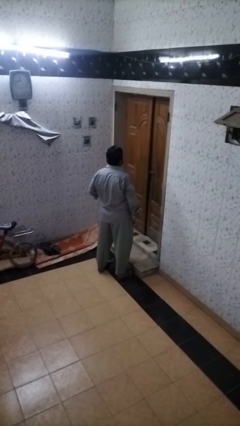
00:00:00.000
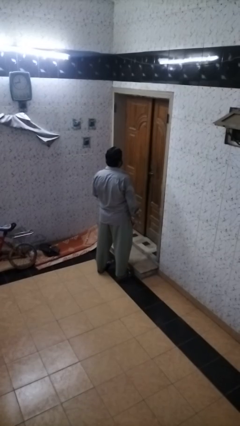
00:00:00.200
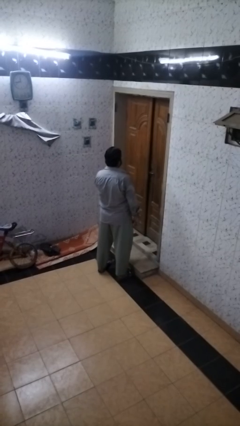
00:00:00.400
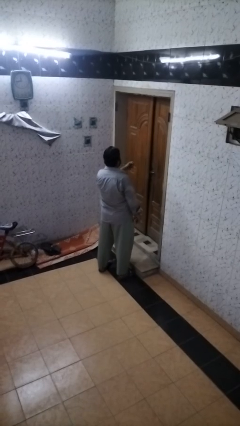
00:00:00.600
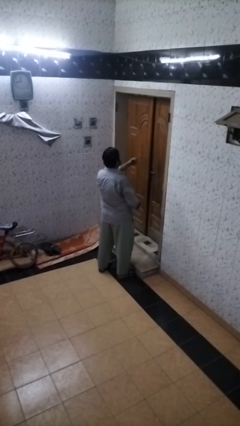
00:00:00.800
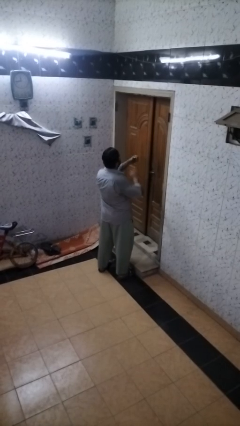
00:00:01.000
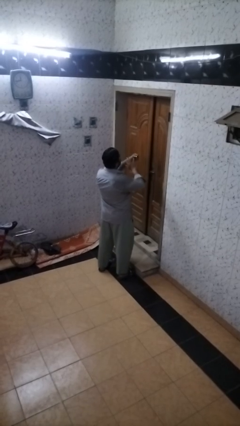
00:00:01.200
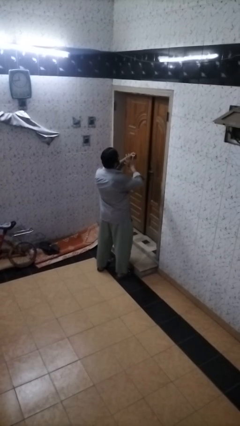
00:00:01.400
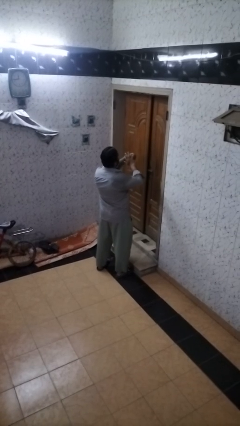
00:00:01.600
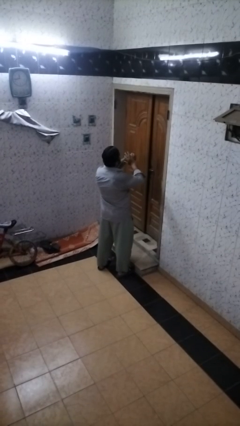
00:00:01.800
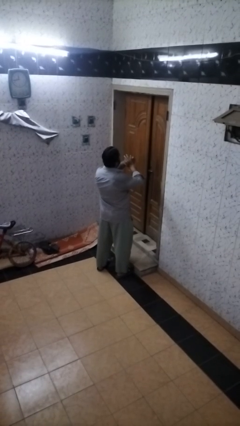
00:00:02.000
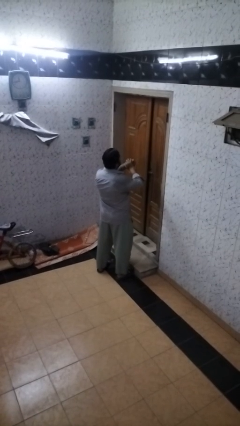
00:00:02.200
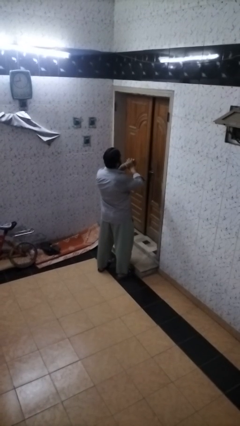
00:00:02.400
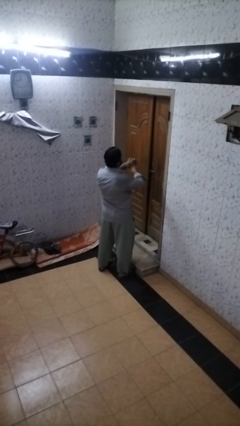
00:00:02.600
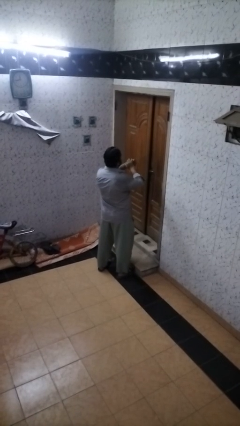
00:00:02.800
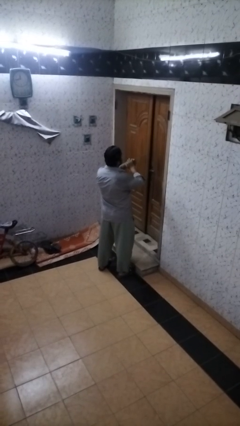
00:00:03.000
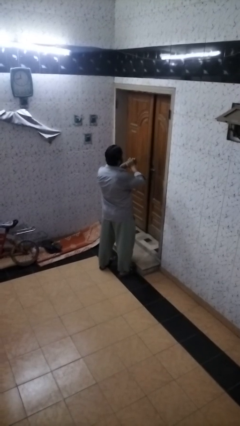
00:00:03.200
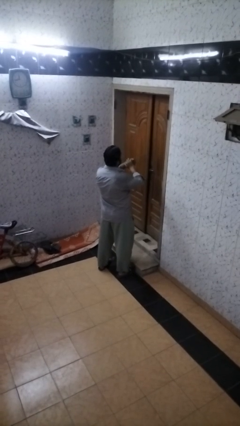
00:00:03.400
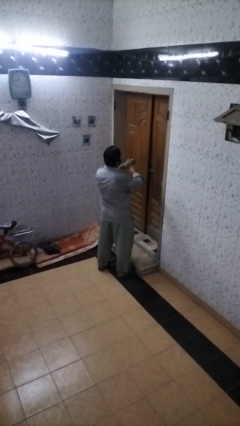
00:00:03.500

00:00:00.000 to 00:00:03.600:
person puts on ring

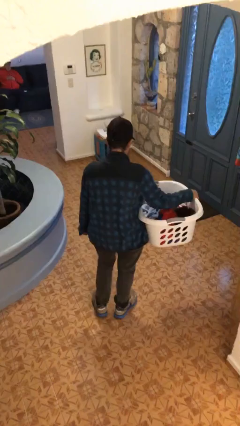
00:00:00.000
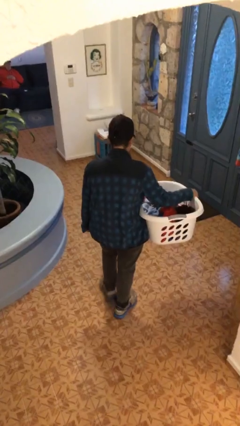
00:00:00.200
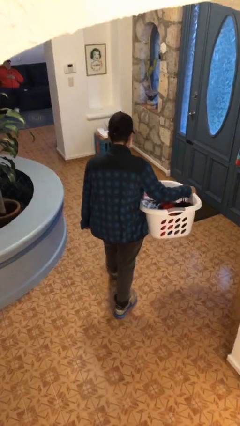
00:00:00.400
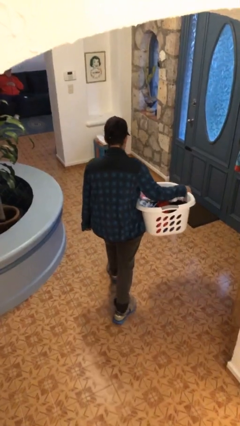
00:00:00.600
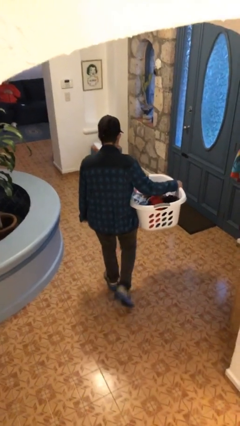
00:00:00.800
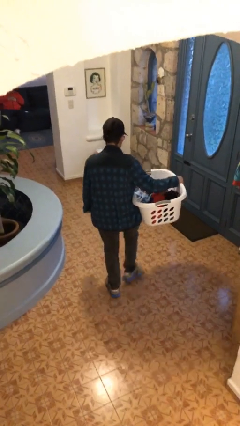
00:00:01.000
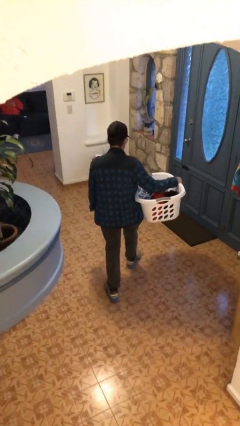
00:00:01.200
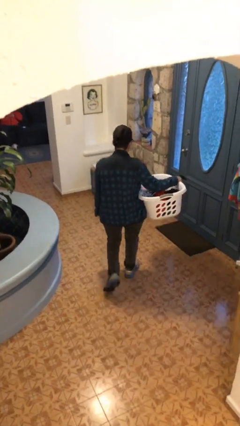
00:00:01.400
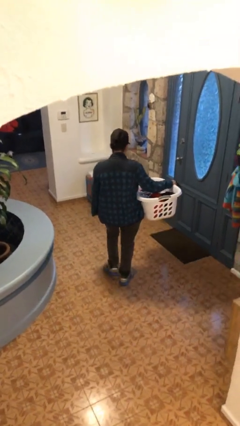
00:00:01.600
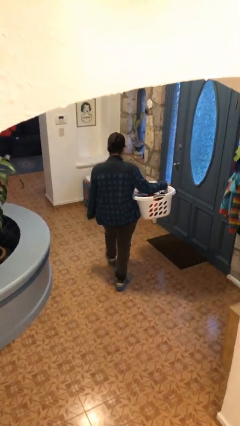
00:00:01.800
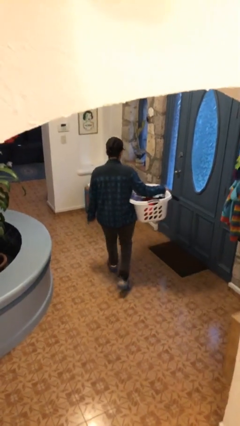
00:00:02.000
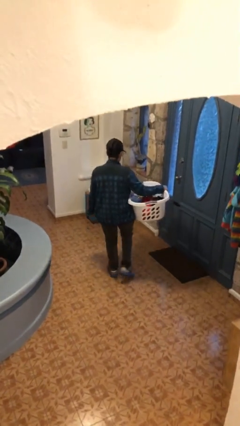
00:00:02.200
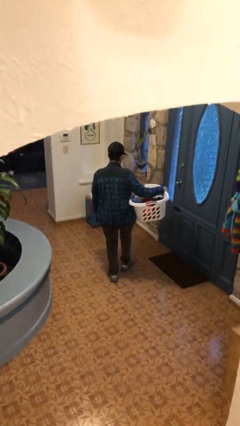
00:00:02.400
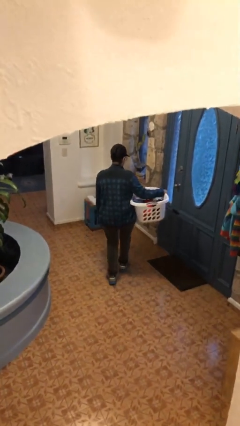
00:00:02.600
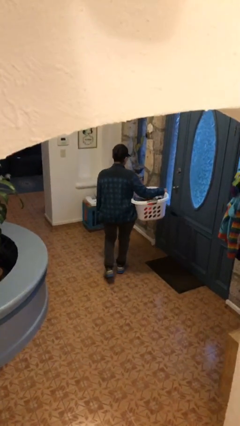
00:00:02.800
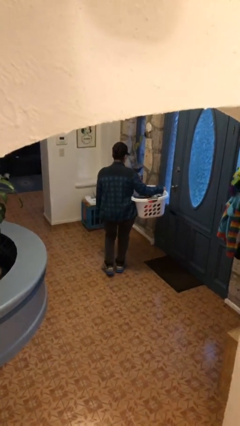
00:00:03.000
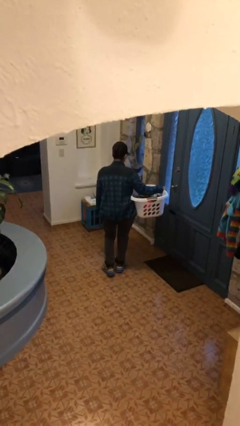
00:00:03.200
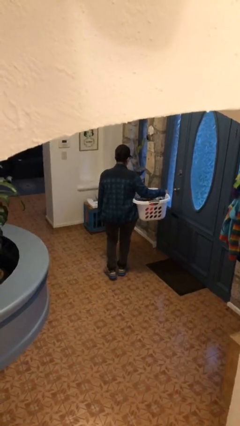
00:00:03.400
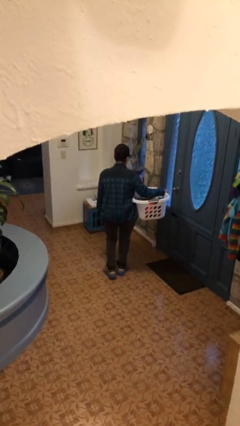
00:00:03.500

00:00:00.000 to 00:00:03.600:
person carries laundry basket

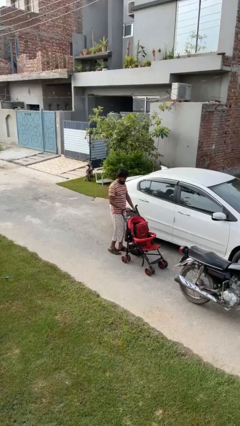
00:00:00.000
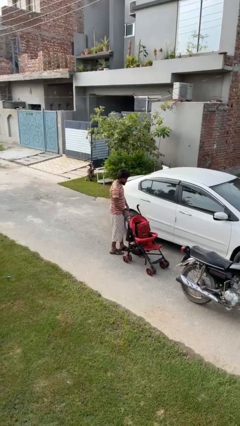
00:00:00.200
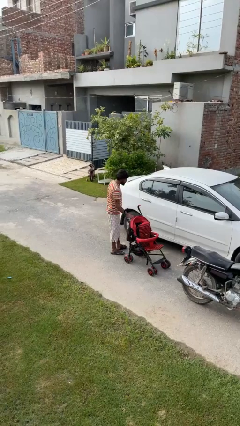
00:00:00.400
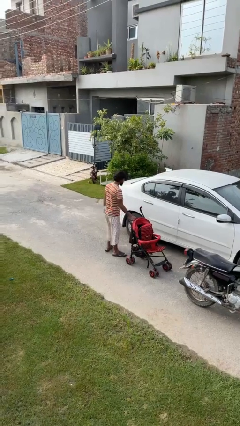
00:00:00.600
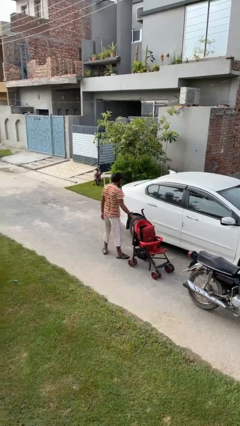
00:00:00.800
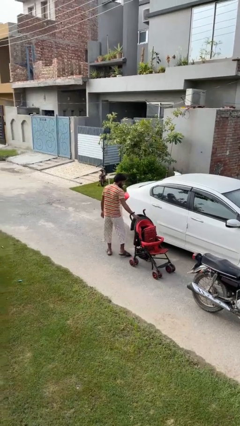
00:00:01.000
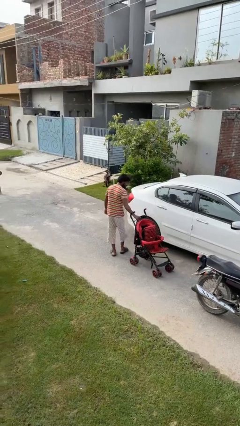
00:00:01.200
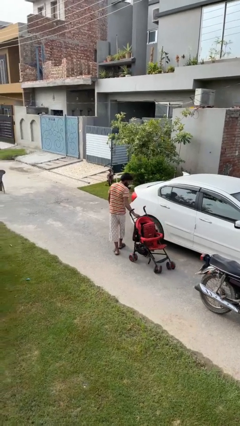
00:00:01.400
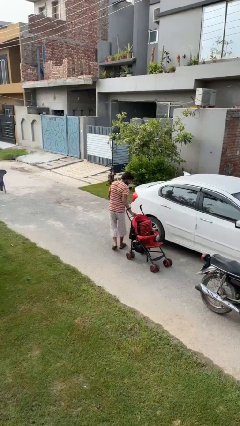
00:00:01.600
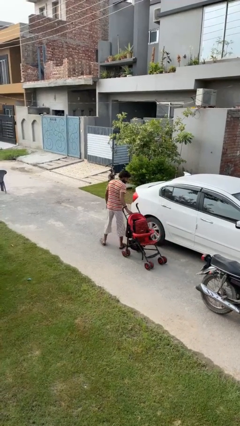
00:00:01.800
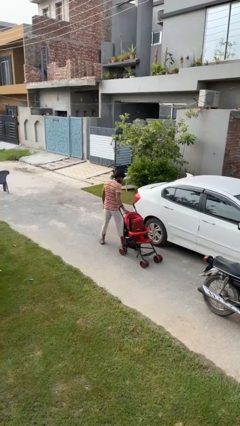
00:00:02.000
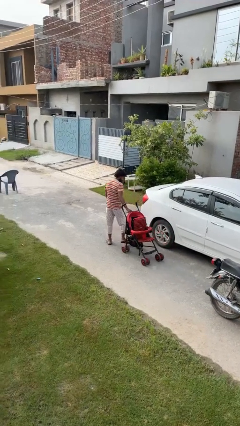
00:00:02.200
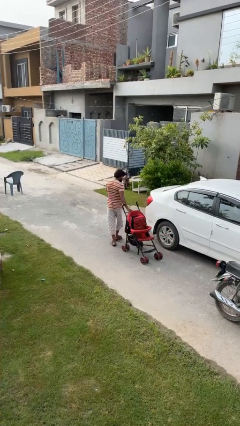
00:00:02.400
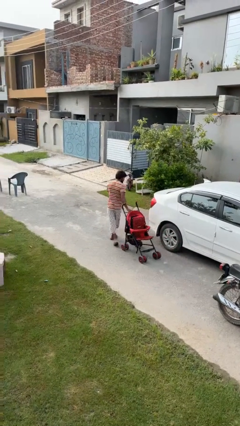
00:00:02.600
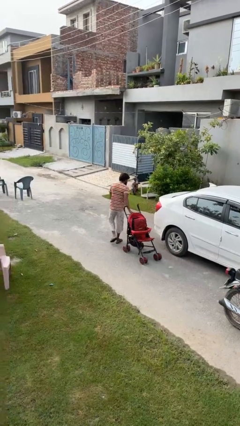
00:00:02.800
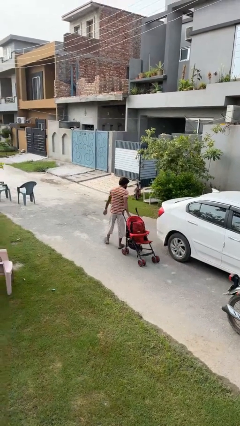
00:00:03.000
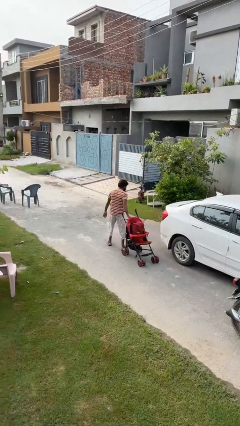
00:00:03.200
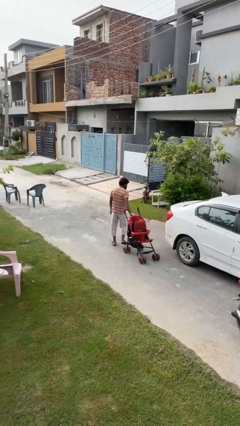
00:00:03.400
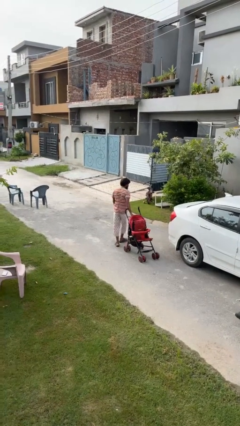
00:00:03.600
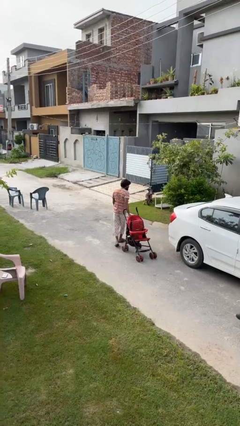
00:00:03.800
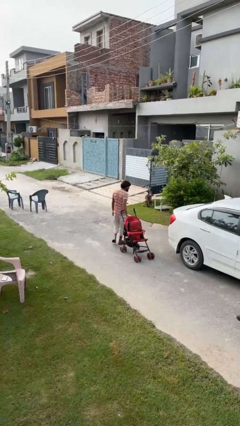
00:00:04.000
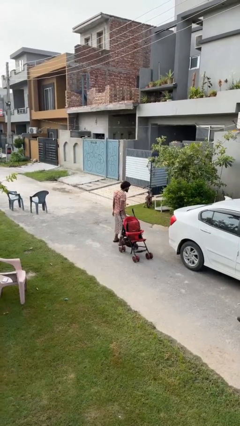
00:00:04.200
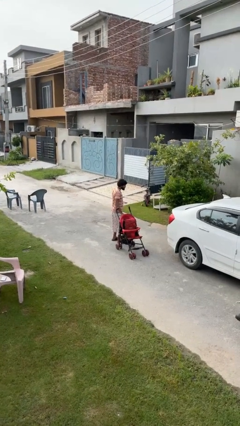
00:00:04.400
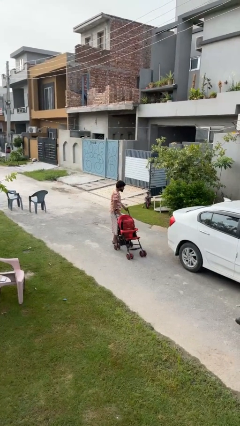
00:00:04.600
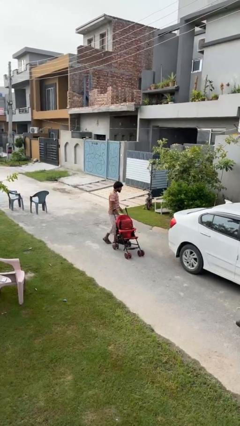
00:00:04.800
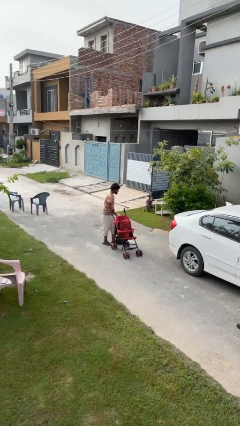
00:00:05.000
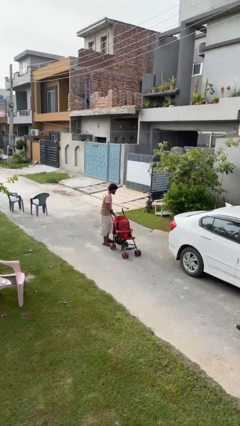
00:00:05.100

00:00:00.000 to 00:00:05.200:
person pulls wheeled cart

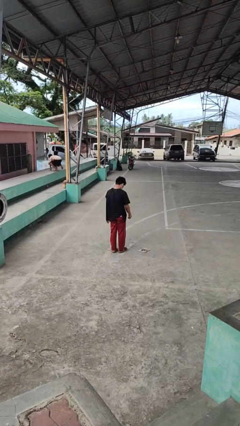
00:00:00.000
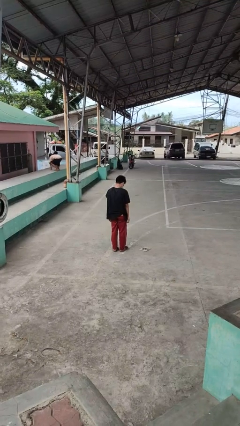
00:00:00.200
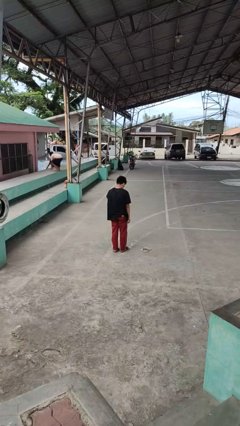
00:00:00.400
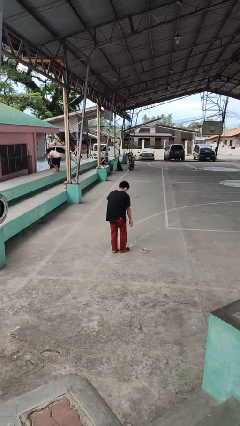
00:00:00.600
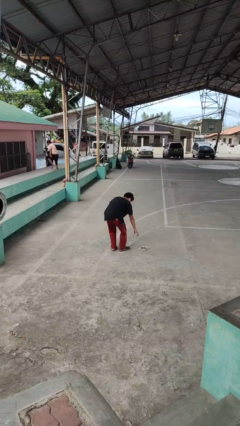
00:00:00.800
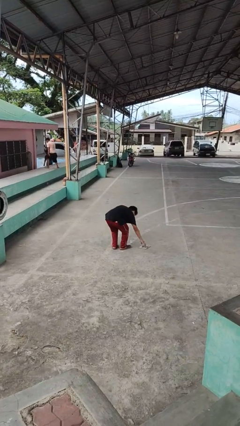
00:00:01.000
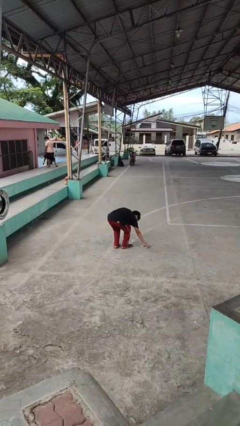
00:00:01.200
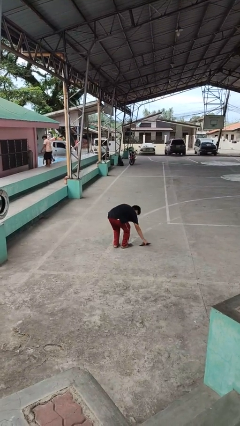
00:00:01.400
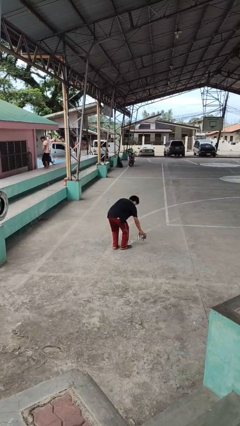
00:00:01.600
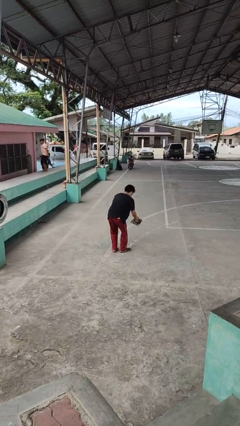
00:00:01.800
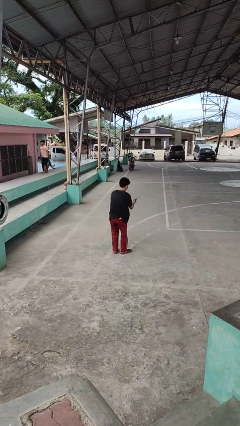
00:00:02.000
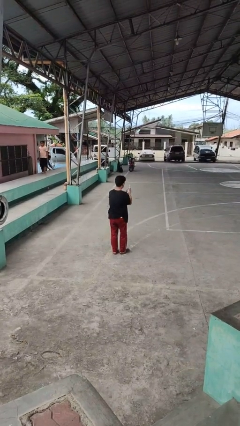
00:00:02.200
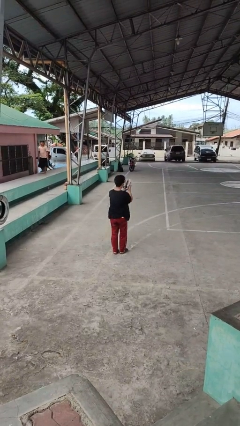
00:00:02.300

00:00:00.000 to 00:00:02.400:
person picks up object from floor

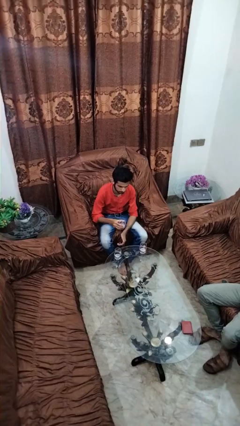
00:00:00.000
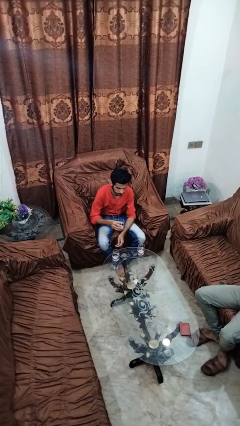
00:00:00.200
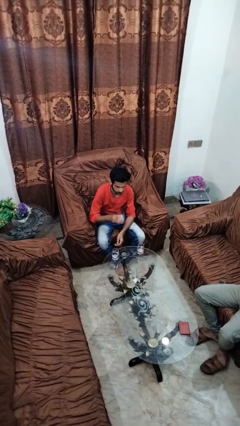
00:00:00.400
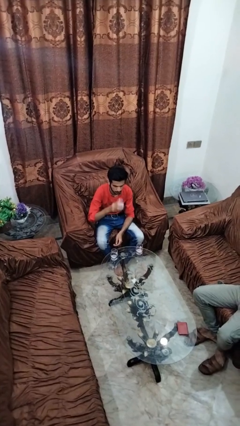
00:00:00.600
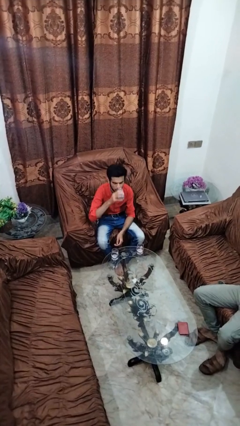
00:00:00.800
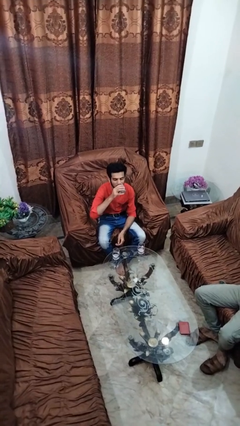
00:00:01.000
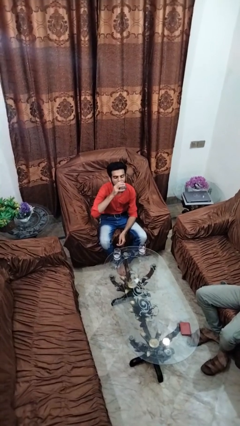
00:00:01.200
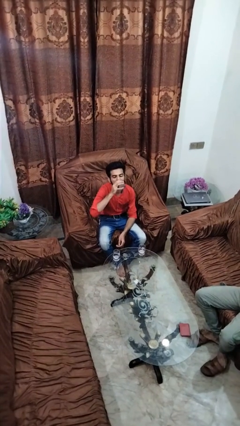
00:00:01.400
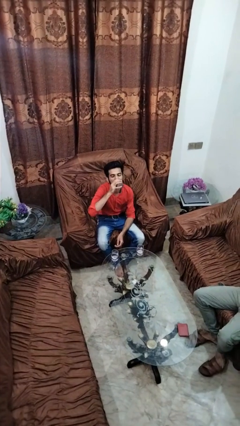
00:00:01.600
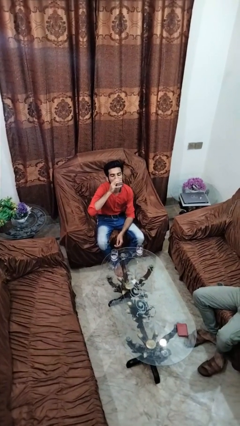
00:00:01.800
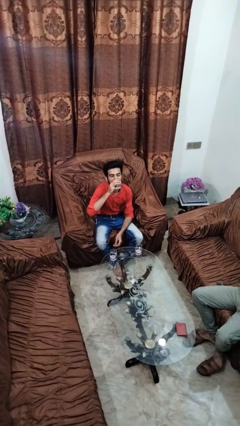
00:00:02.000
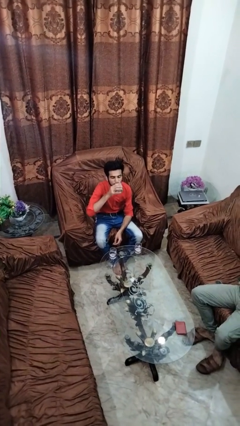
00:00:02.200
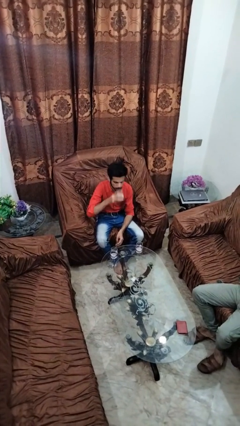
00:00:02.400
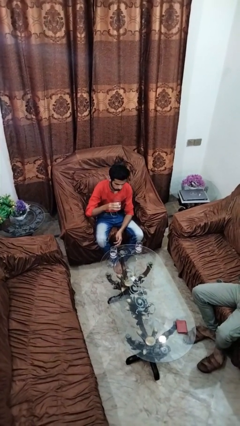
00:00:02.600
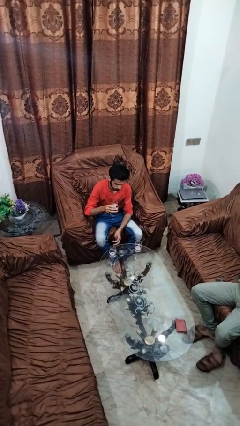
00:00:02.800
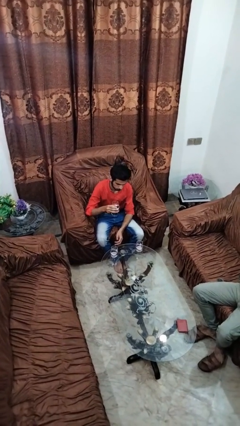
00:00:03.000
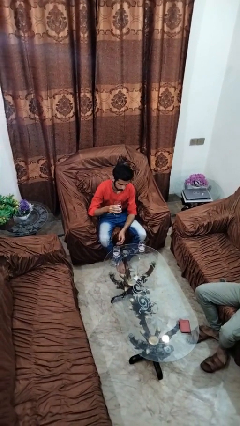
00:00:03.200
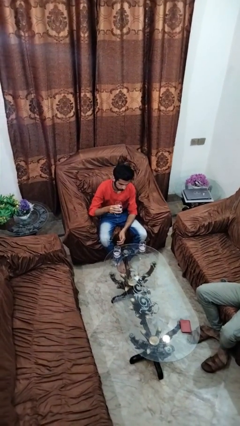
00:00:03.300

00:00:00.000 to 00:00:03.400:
person drinks from shotglass
